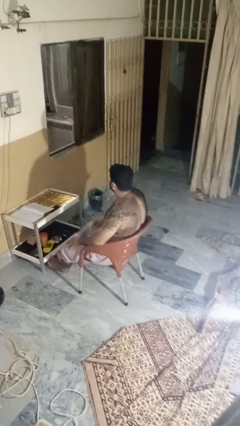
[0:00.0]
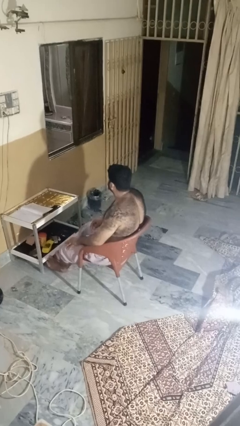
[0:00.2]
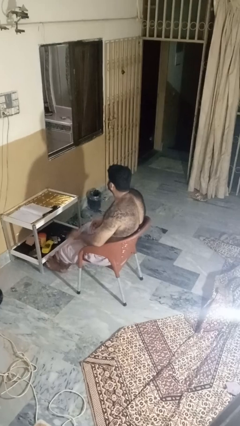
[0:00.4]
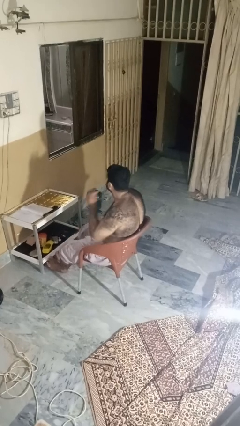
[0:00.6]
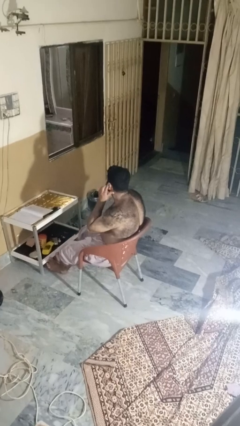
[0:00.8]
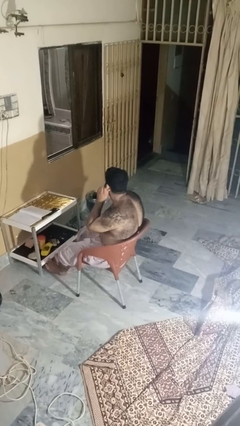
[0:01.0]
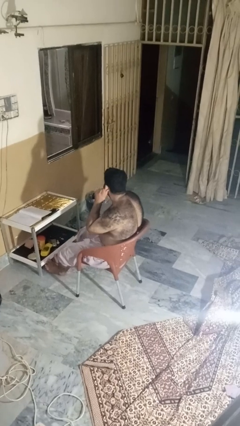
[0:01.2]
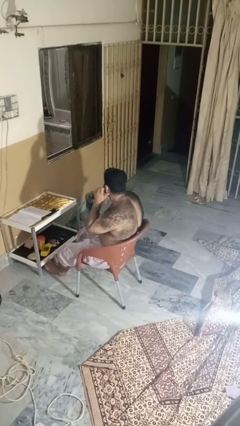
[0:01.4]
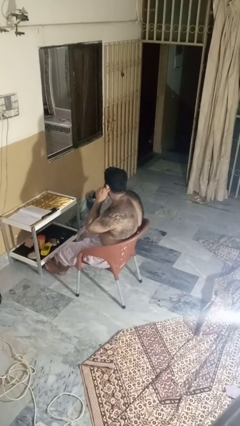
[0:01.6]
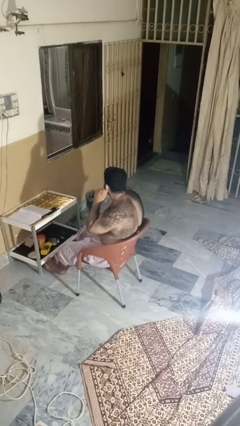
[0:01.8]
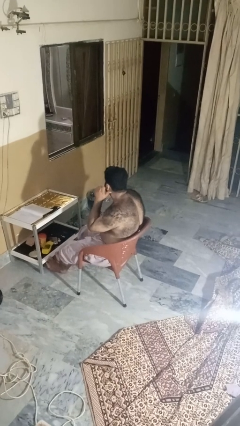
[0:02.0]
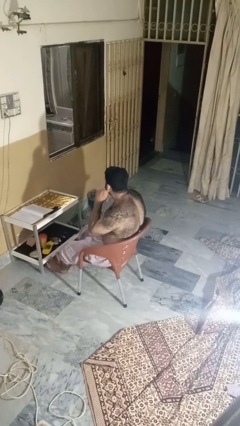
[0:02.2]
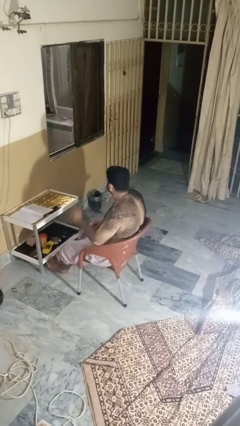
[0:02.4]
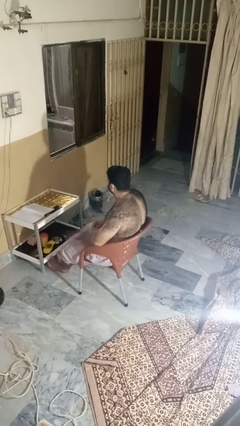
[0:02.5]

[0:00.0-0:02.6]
person touches earlobe

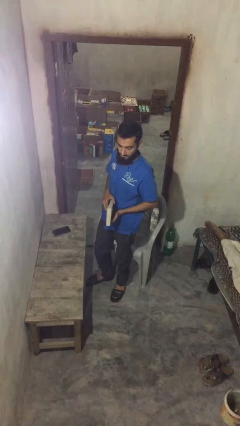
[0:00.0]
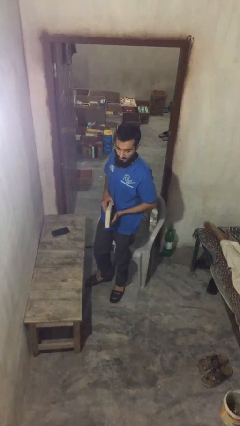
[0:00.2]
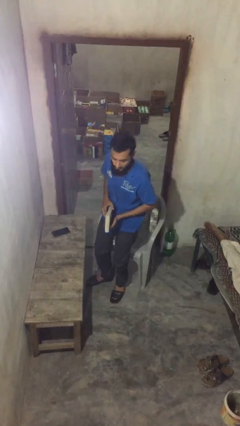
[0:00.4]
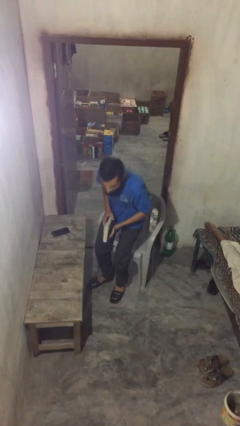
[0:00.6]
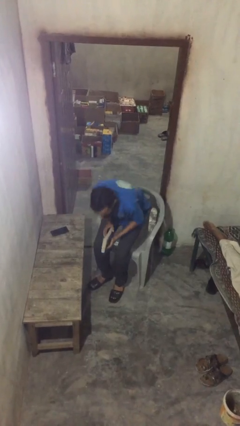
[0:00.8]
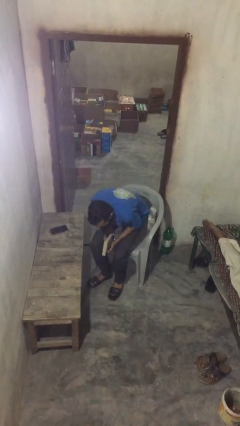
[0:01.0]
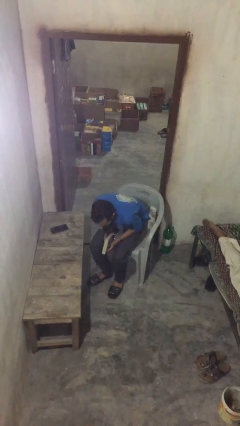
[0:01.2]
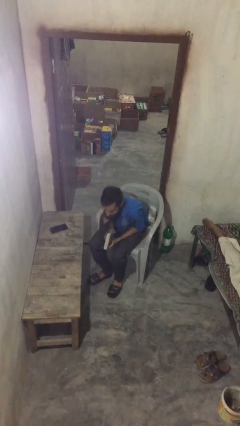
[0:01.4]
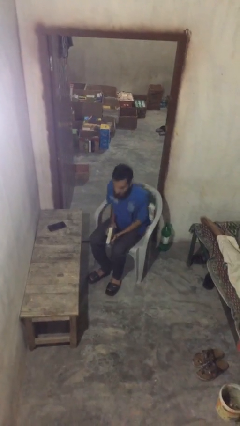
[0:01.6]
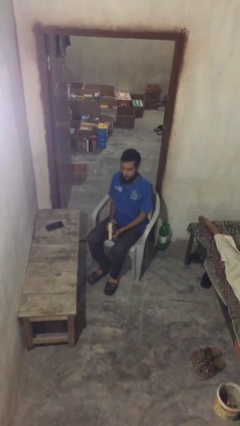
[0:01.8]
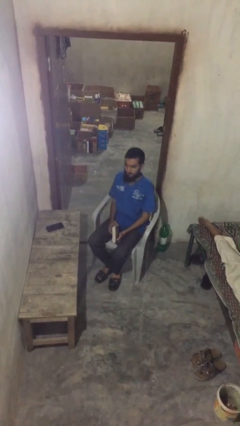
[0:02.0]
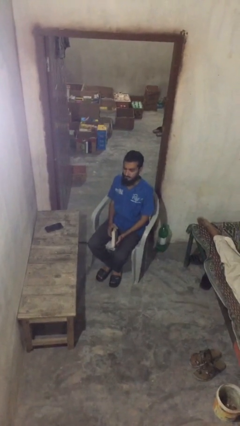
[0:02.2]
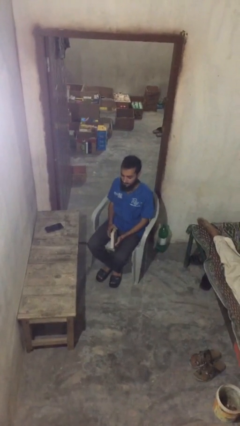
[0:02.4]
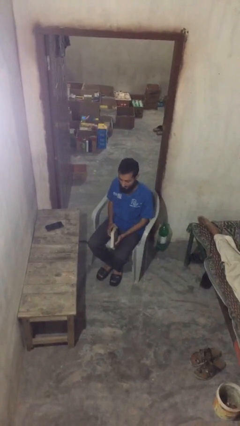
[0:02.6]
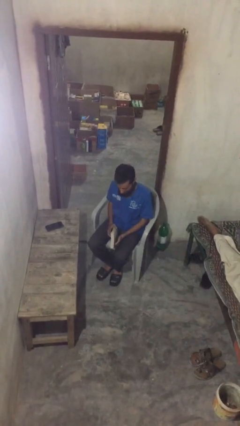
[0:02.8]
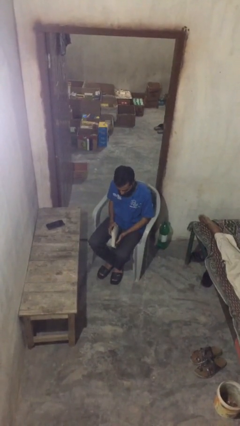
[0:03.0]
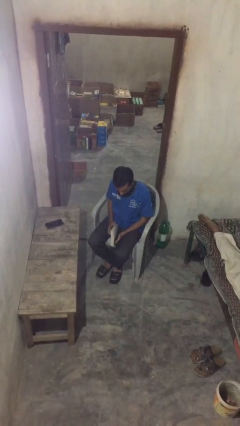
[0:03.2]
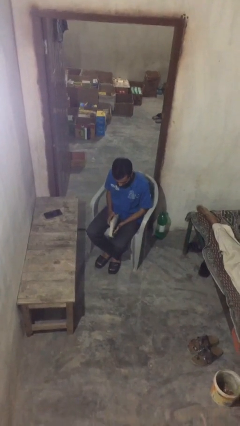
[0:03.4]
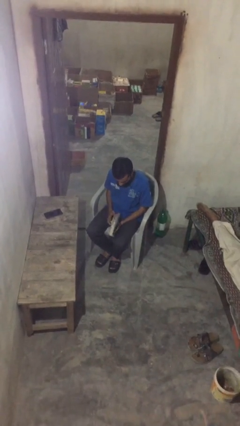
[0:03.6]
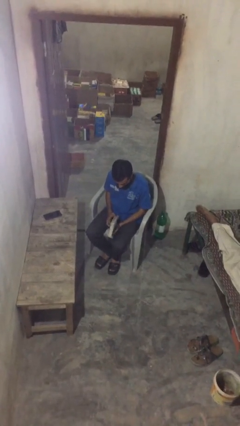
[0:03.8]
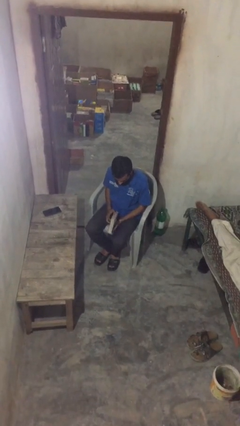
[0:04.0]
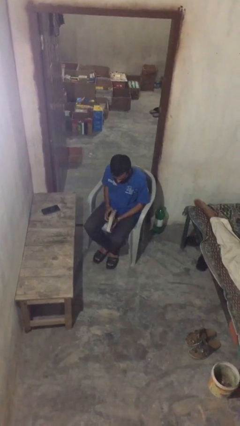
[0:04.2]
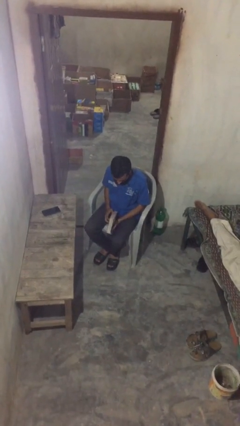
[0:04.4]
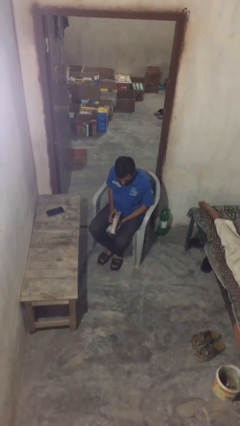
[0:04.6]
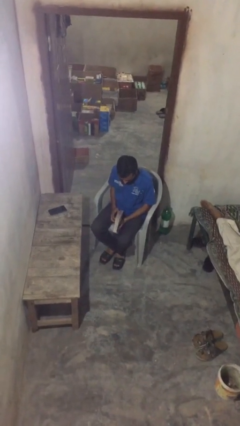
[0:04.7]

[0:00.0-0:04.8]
person sits down

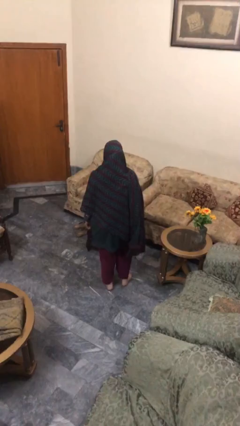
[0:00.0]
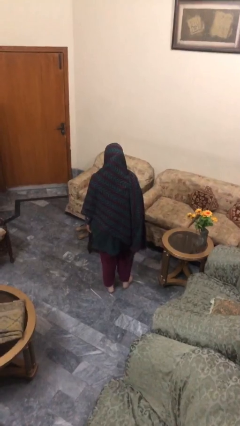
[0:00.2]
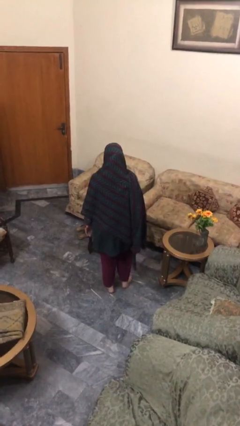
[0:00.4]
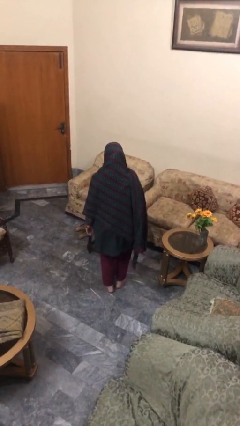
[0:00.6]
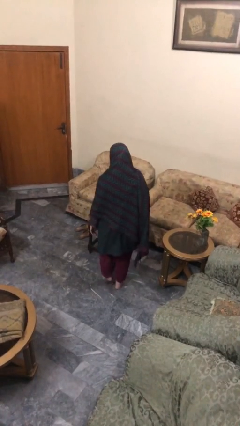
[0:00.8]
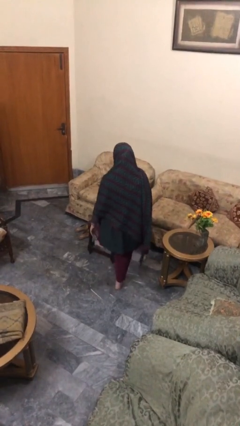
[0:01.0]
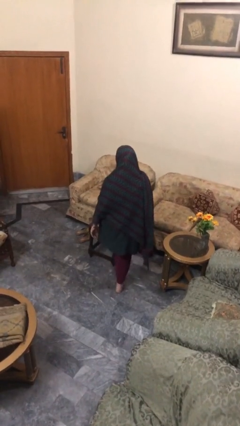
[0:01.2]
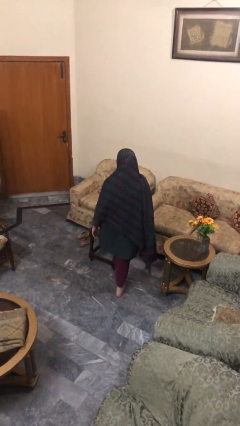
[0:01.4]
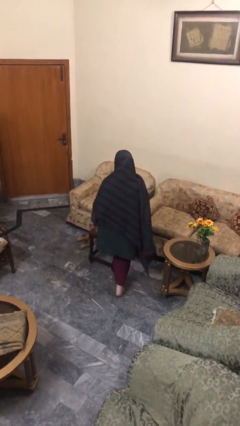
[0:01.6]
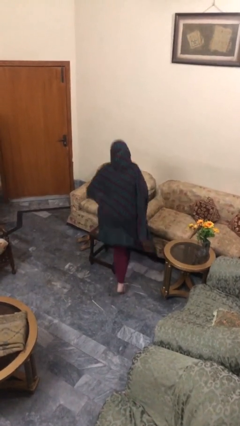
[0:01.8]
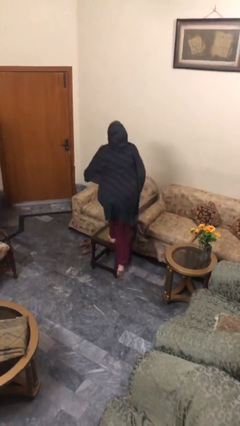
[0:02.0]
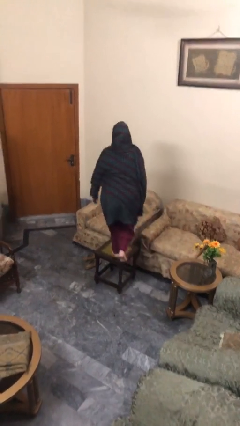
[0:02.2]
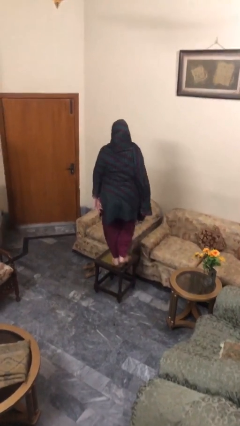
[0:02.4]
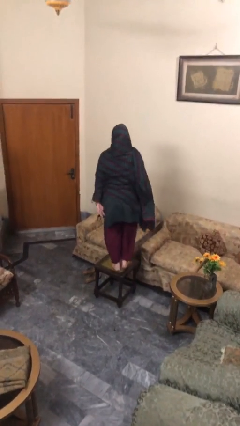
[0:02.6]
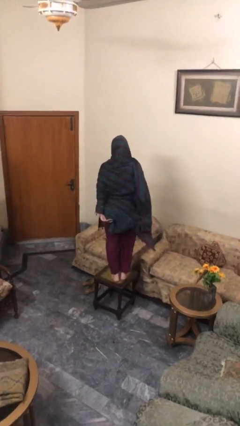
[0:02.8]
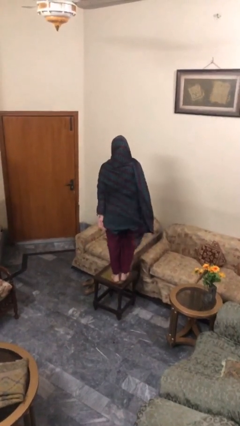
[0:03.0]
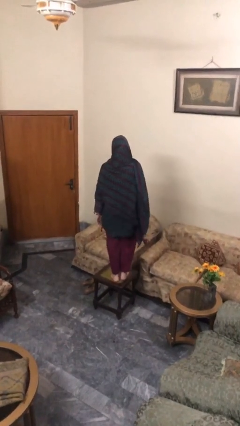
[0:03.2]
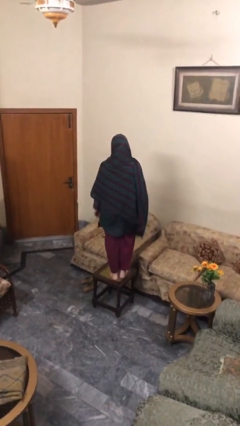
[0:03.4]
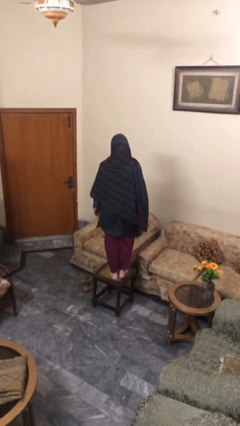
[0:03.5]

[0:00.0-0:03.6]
person climbs on table

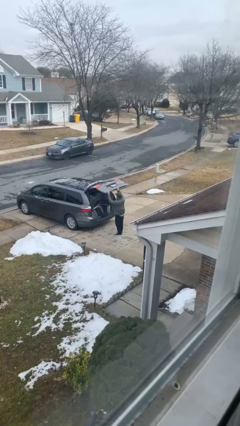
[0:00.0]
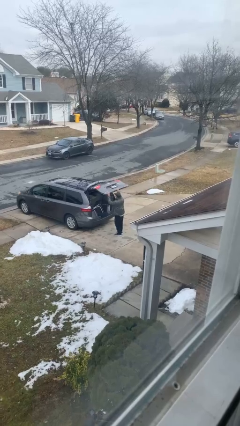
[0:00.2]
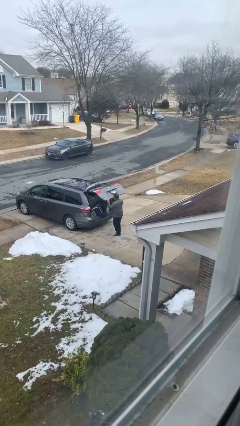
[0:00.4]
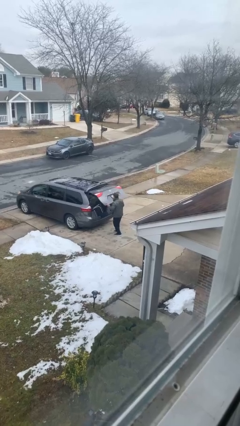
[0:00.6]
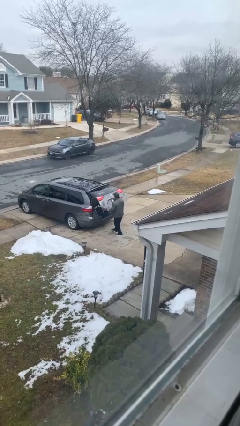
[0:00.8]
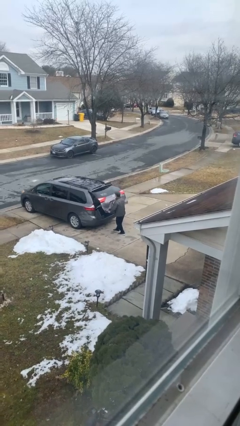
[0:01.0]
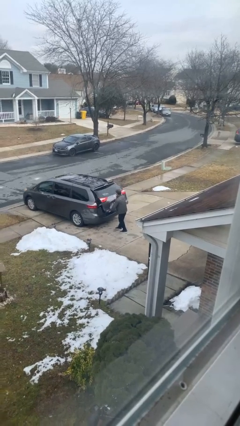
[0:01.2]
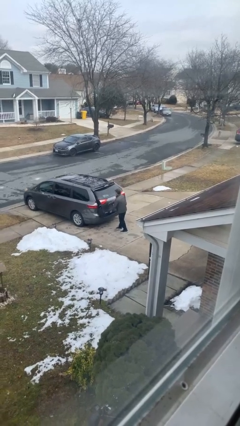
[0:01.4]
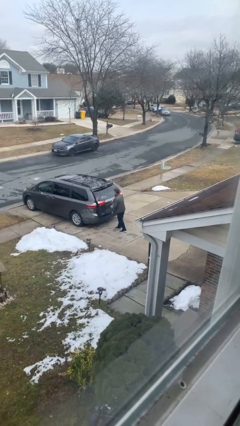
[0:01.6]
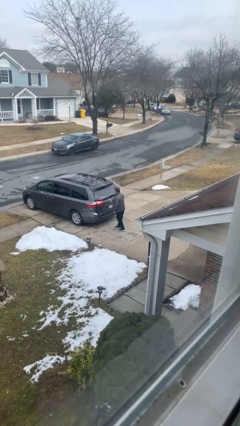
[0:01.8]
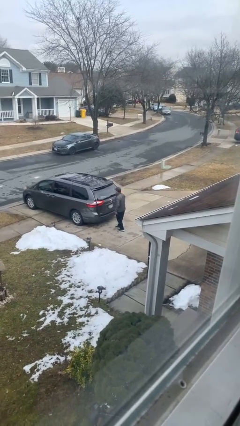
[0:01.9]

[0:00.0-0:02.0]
person closes car trunk

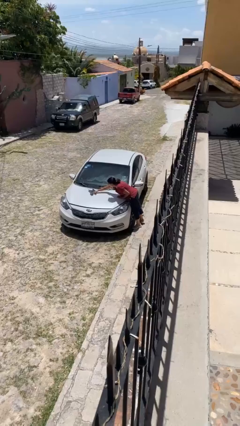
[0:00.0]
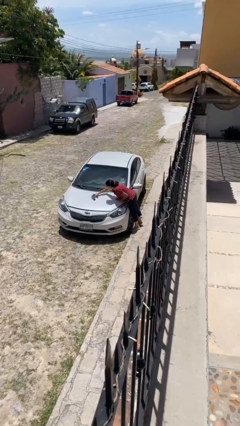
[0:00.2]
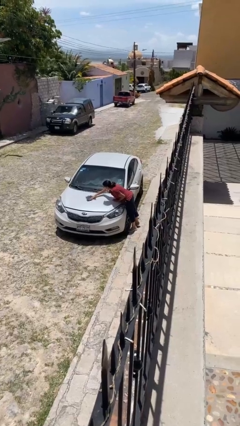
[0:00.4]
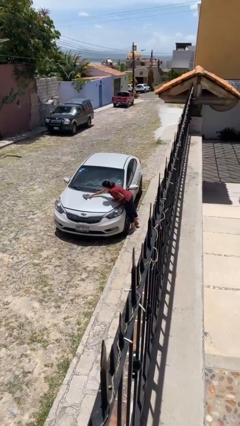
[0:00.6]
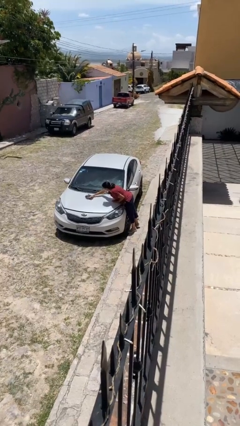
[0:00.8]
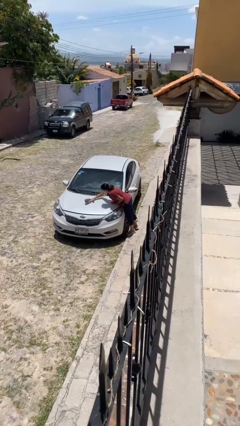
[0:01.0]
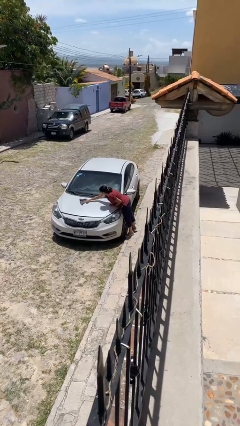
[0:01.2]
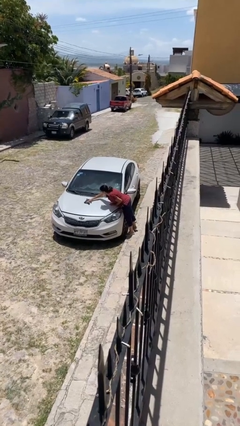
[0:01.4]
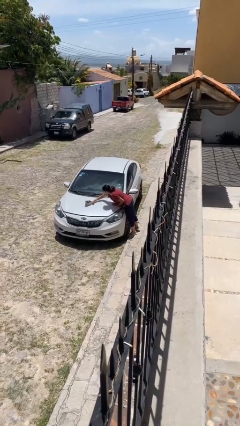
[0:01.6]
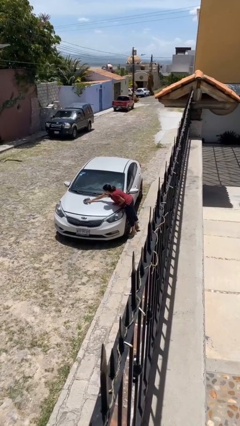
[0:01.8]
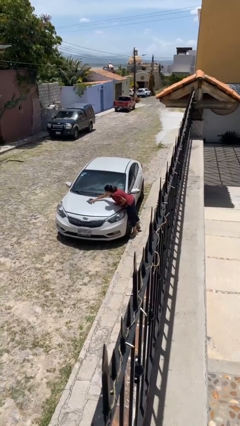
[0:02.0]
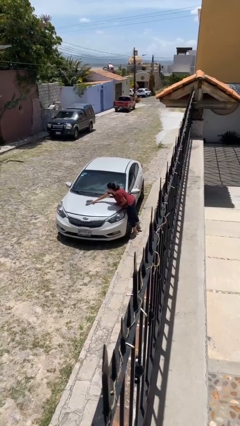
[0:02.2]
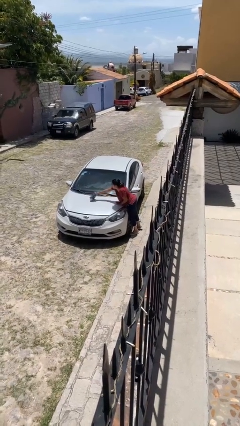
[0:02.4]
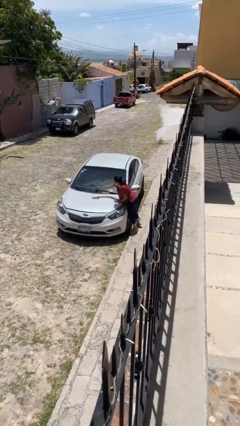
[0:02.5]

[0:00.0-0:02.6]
person polishes car with rag

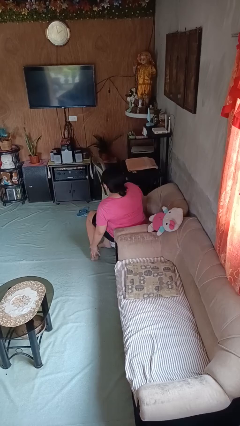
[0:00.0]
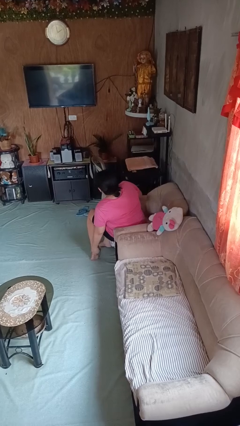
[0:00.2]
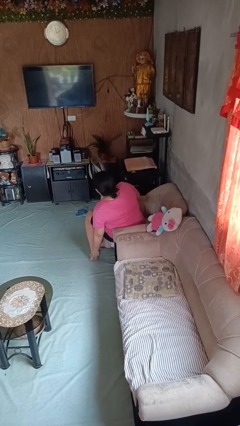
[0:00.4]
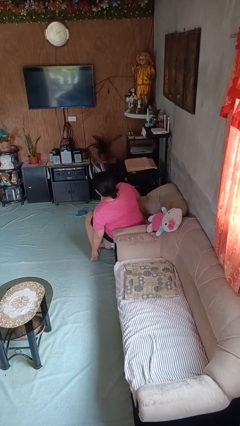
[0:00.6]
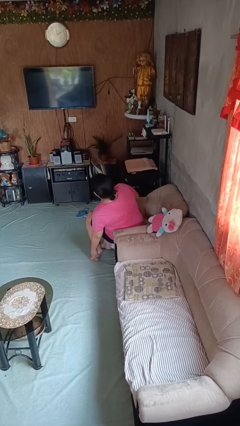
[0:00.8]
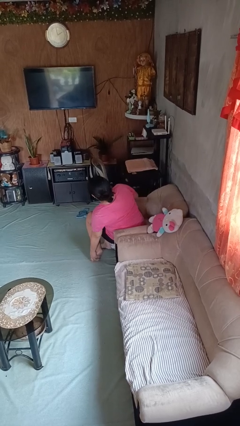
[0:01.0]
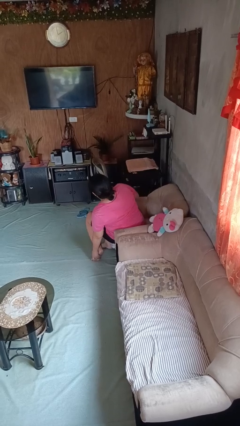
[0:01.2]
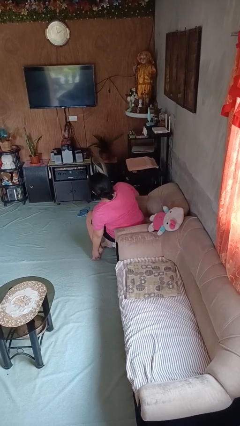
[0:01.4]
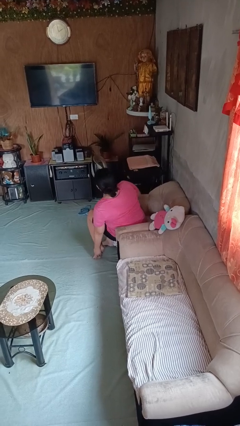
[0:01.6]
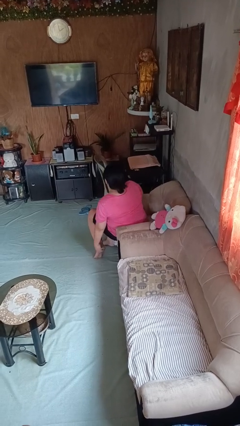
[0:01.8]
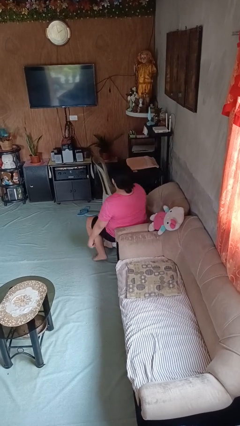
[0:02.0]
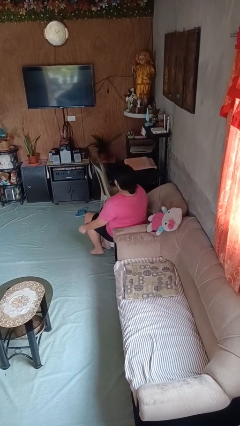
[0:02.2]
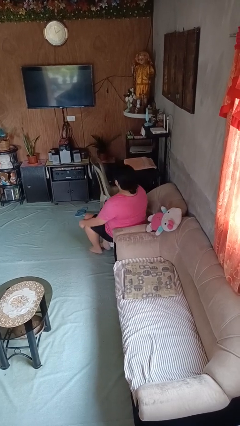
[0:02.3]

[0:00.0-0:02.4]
person rubs foot
